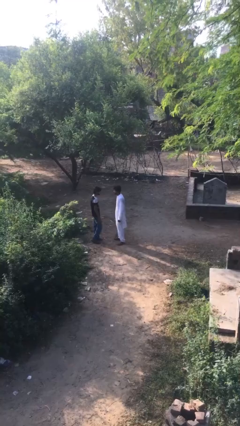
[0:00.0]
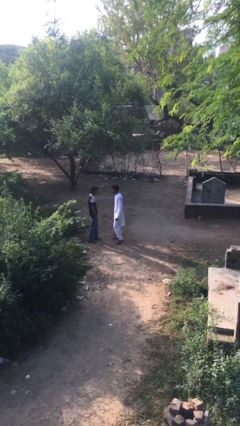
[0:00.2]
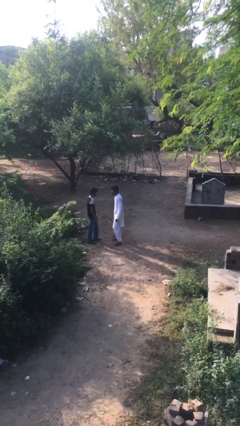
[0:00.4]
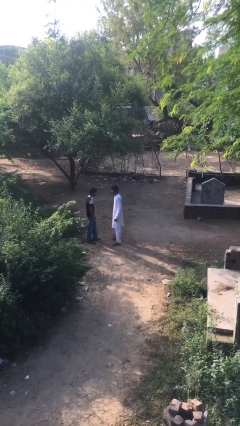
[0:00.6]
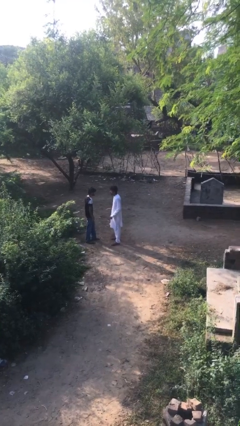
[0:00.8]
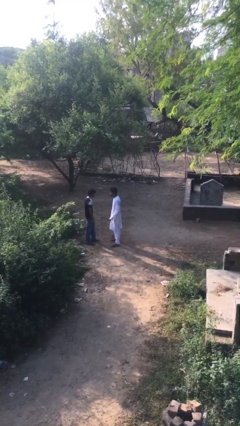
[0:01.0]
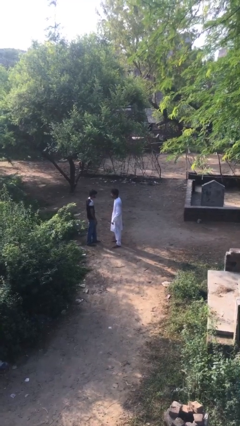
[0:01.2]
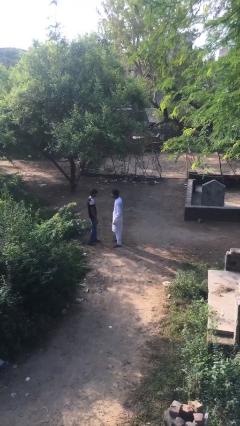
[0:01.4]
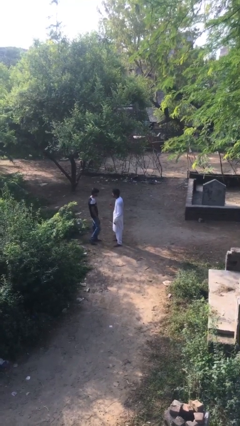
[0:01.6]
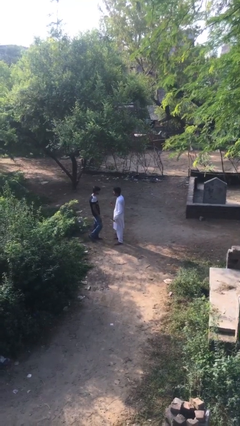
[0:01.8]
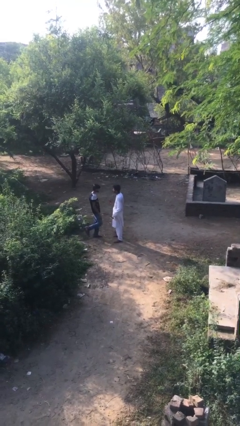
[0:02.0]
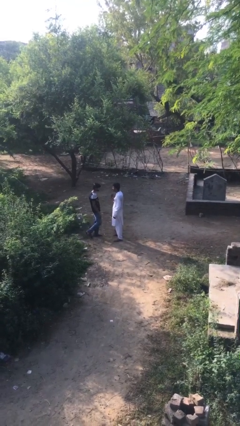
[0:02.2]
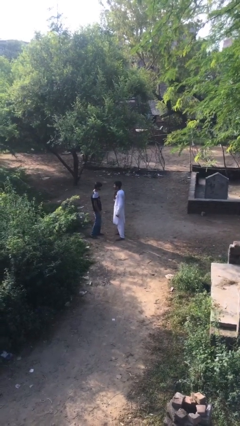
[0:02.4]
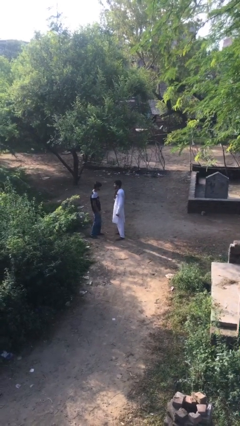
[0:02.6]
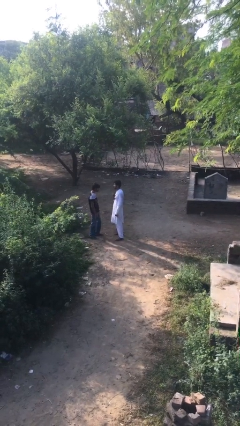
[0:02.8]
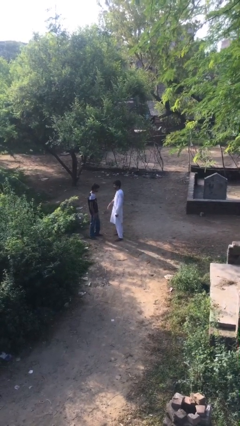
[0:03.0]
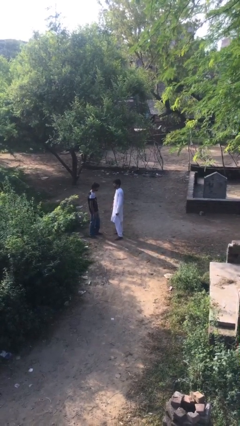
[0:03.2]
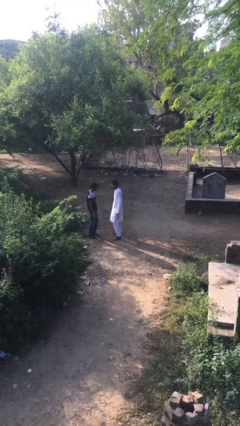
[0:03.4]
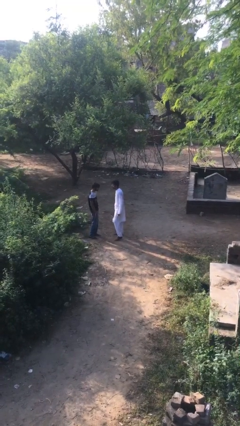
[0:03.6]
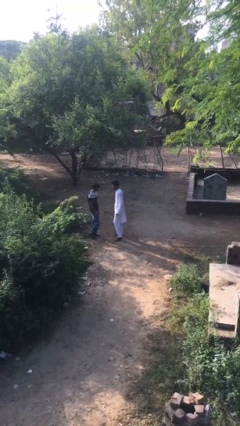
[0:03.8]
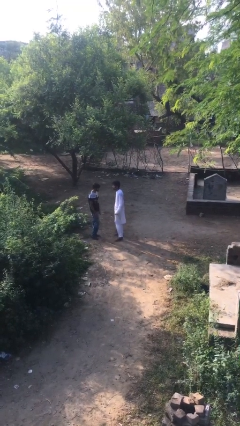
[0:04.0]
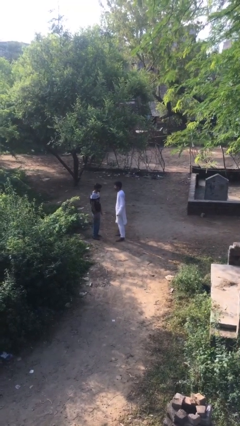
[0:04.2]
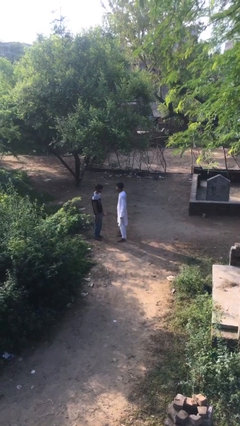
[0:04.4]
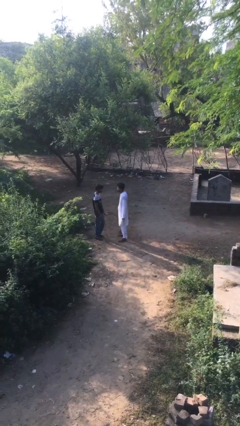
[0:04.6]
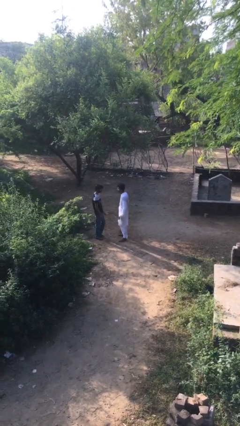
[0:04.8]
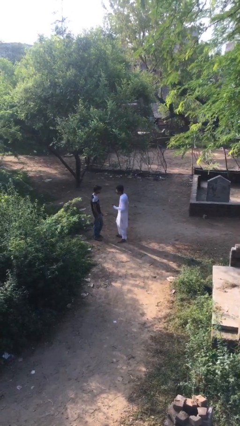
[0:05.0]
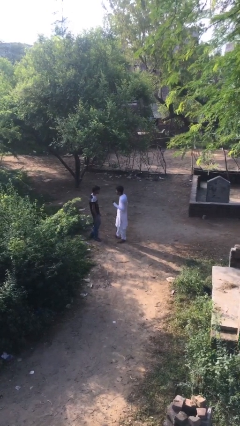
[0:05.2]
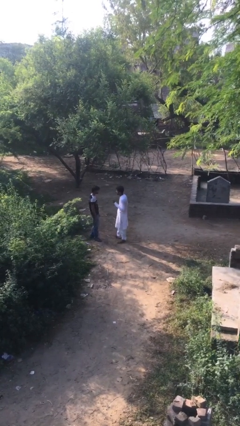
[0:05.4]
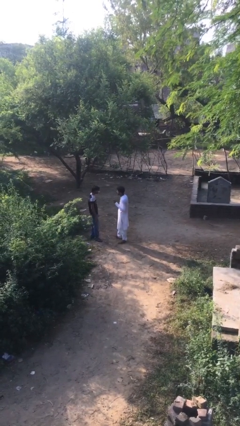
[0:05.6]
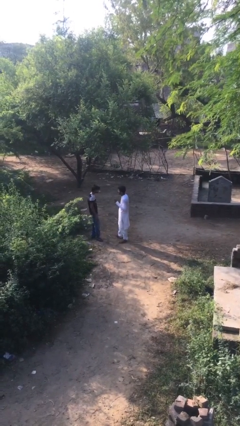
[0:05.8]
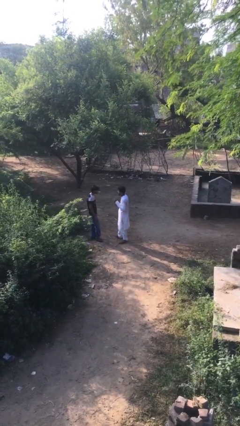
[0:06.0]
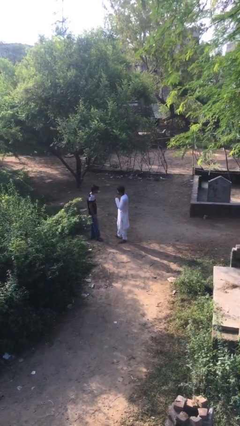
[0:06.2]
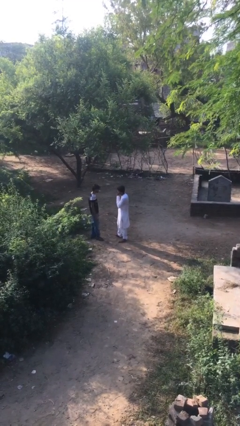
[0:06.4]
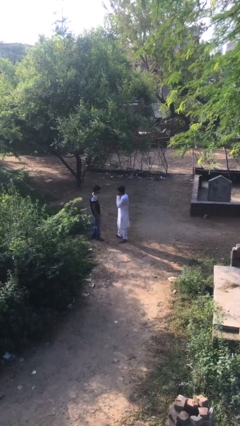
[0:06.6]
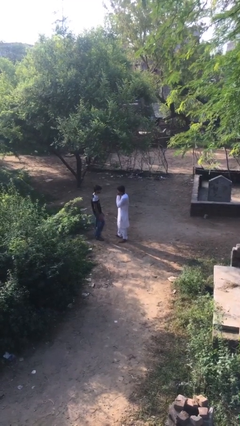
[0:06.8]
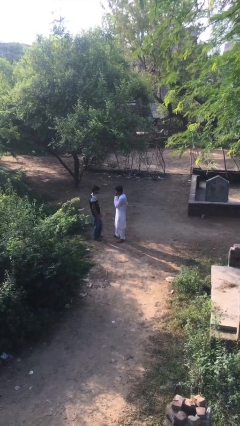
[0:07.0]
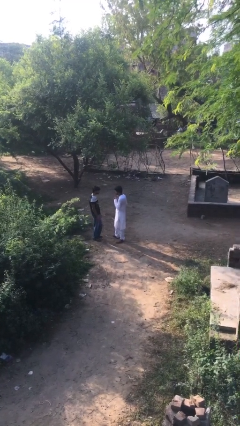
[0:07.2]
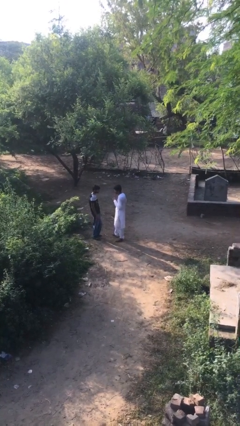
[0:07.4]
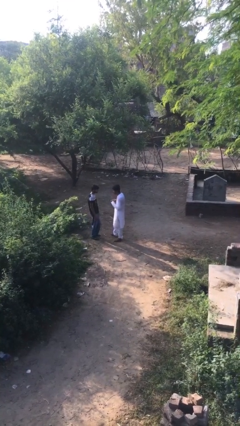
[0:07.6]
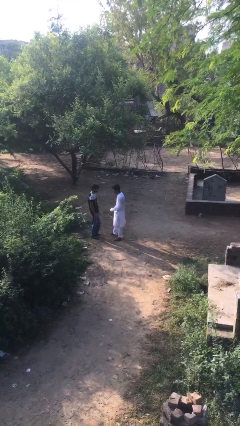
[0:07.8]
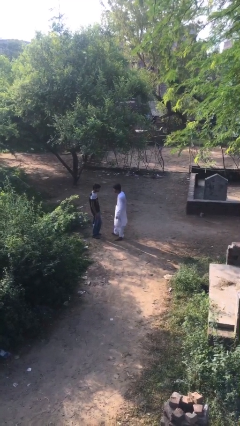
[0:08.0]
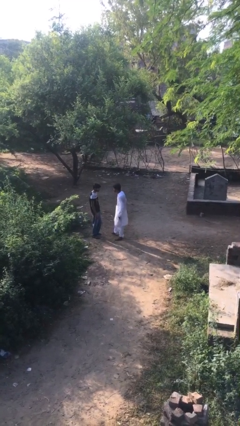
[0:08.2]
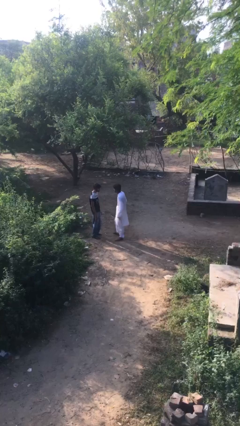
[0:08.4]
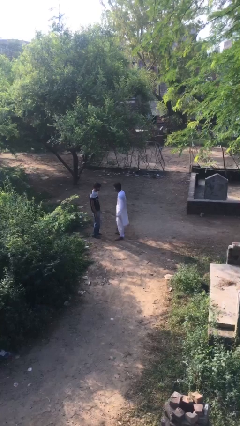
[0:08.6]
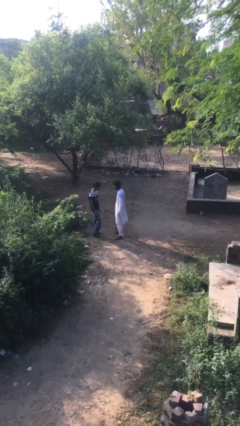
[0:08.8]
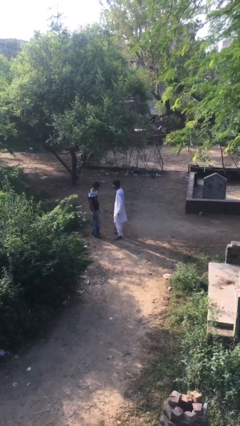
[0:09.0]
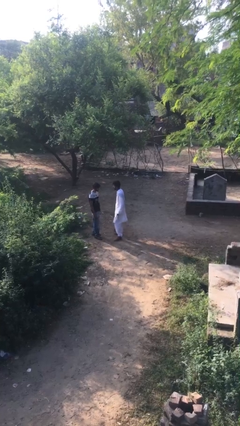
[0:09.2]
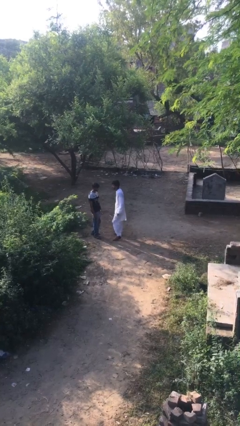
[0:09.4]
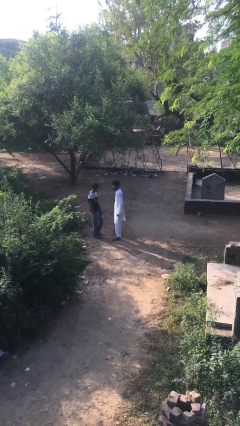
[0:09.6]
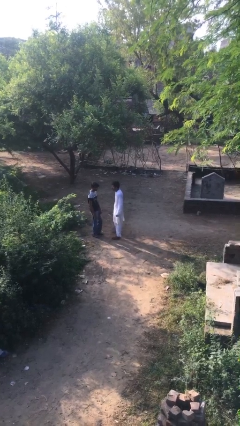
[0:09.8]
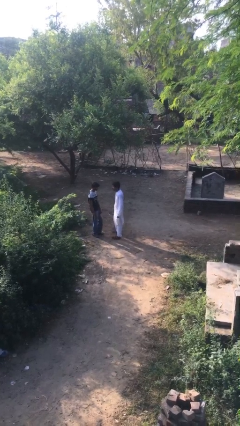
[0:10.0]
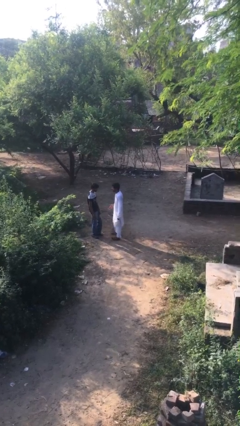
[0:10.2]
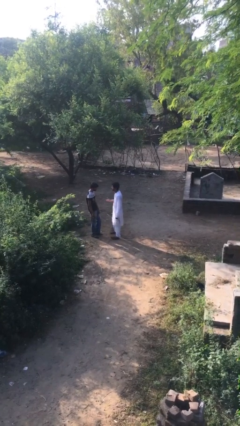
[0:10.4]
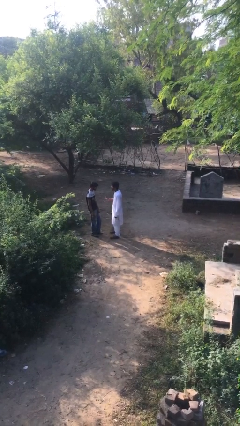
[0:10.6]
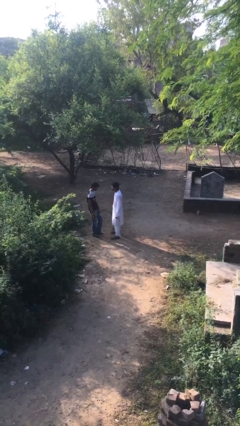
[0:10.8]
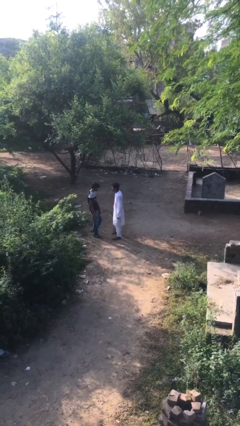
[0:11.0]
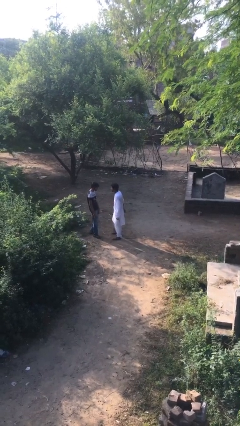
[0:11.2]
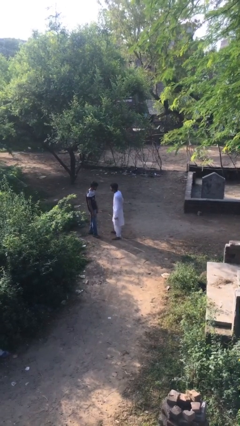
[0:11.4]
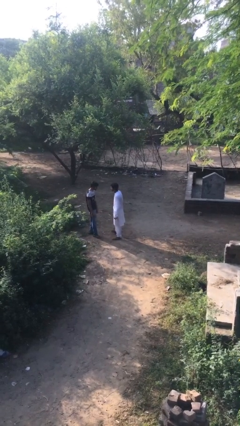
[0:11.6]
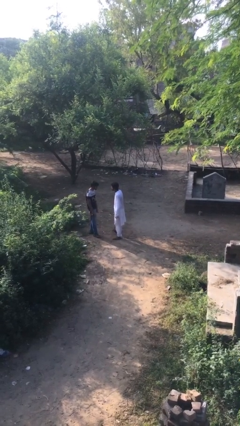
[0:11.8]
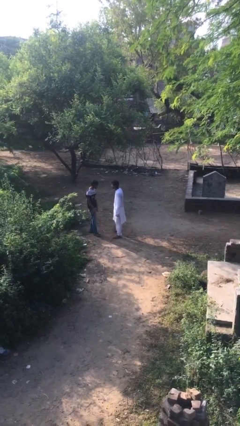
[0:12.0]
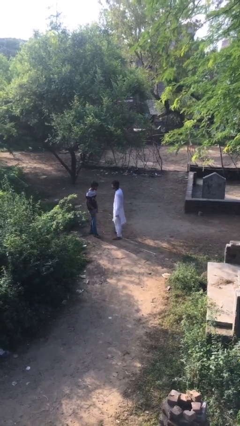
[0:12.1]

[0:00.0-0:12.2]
person talks to person

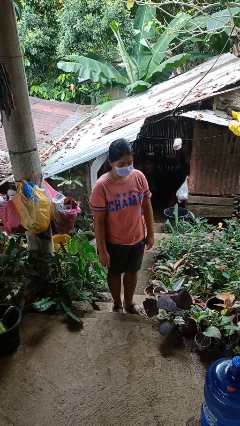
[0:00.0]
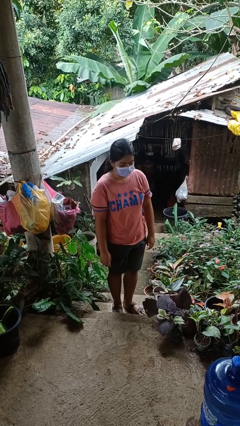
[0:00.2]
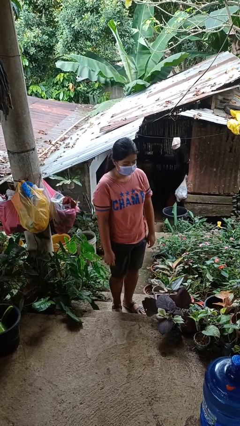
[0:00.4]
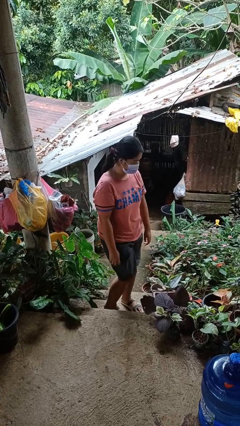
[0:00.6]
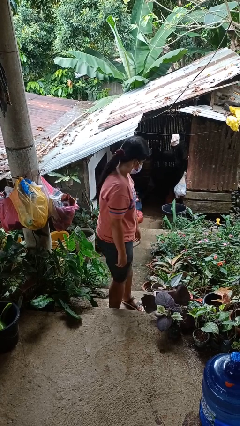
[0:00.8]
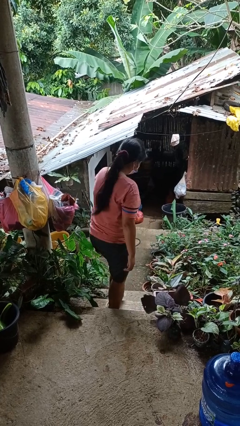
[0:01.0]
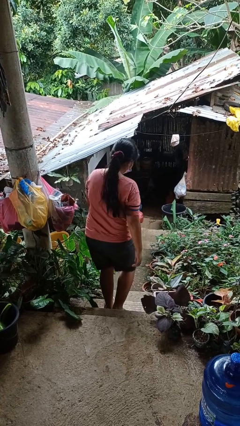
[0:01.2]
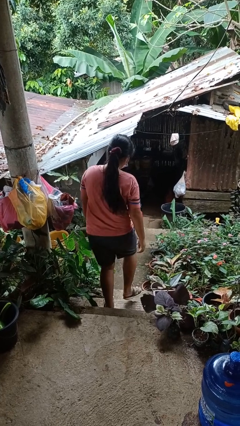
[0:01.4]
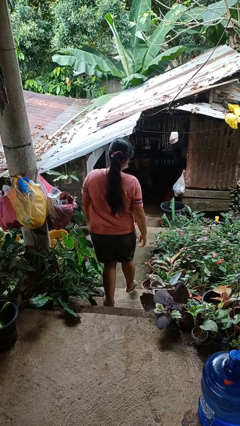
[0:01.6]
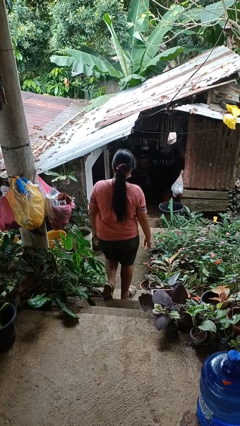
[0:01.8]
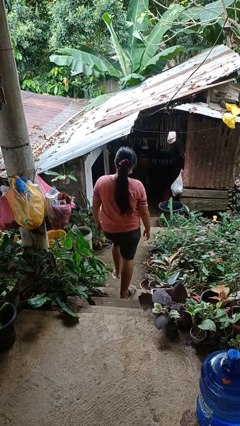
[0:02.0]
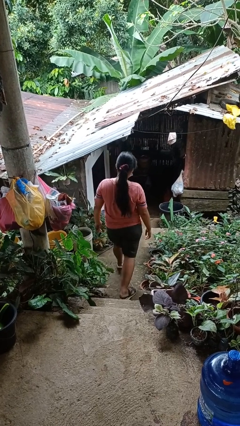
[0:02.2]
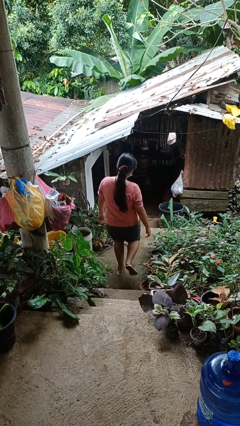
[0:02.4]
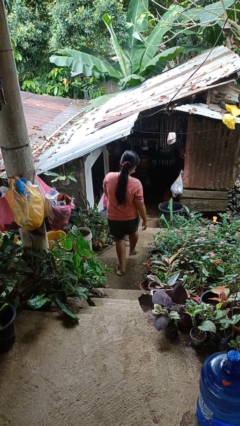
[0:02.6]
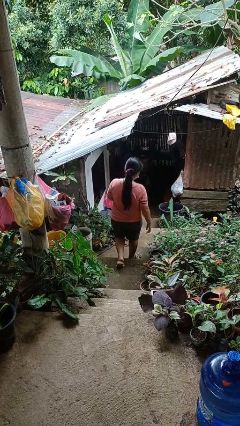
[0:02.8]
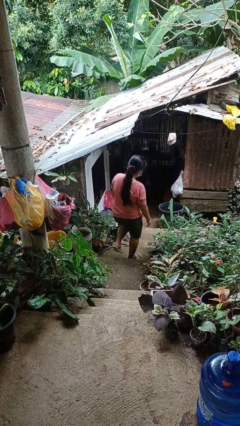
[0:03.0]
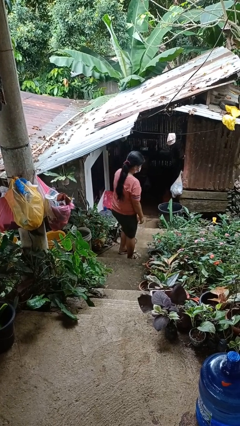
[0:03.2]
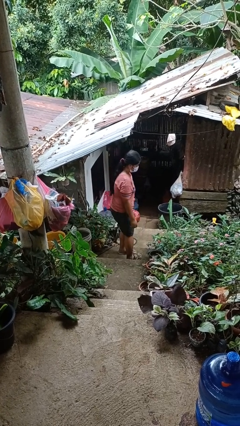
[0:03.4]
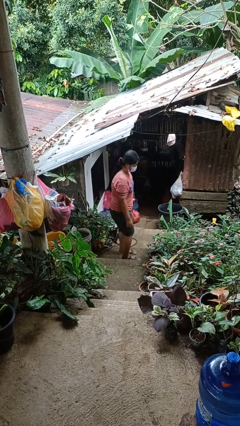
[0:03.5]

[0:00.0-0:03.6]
person climbs down stairs

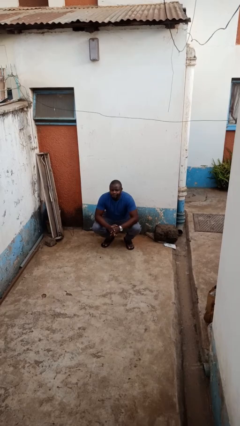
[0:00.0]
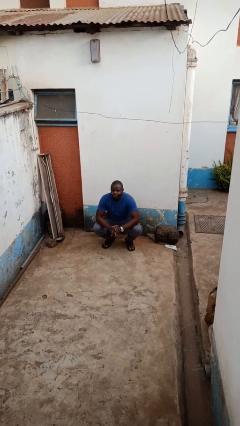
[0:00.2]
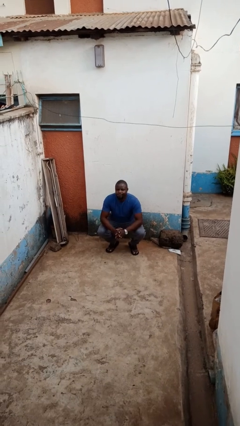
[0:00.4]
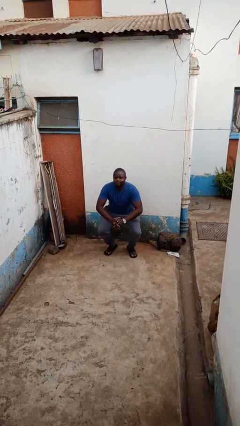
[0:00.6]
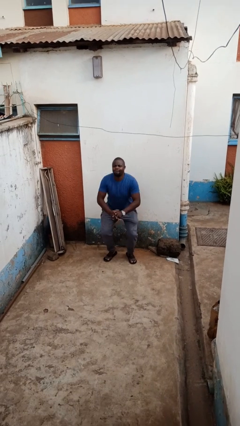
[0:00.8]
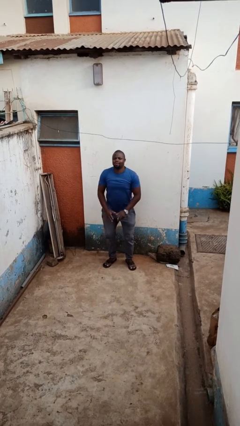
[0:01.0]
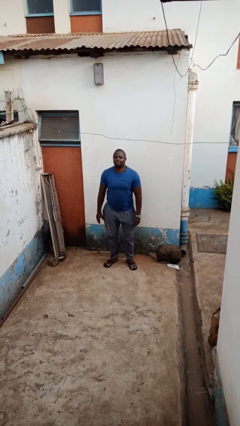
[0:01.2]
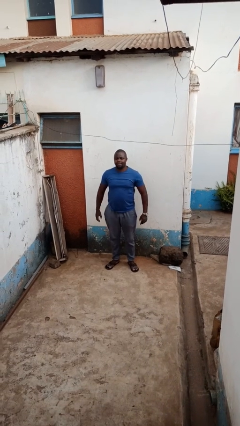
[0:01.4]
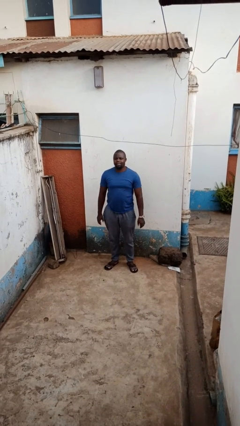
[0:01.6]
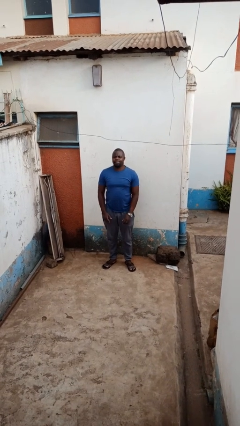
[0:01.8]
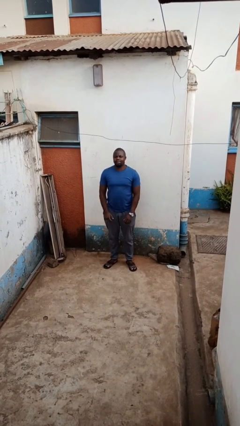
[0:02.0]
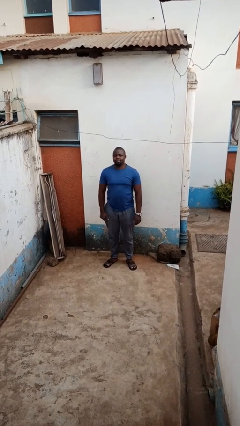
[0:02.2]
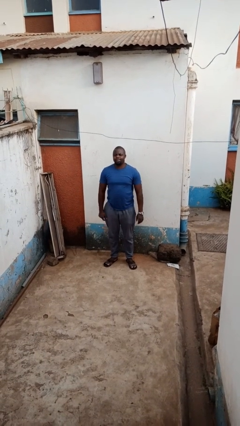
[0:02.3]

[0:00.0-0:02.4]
person stands up
